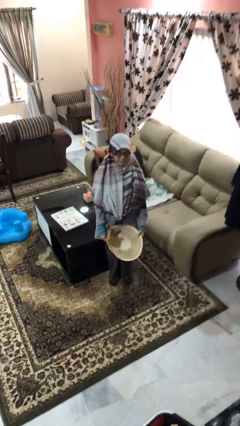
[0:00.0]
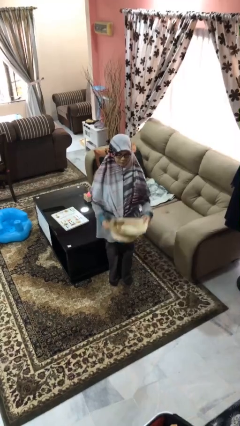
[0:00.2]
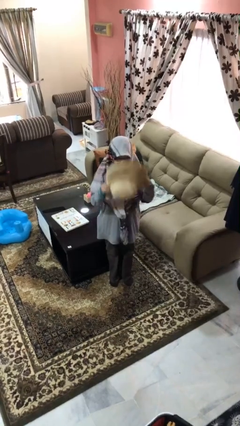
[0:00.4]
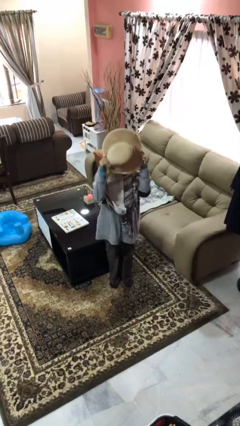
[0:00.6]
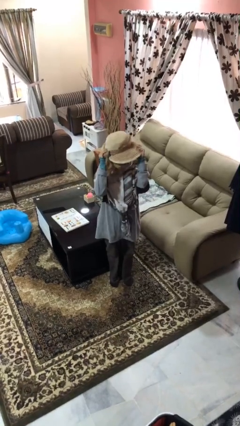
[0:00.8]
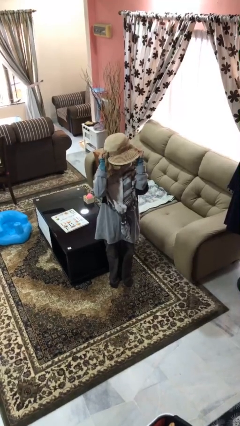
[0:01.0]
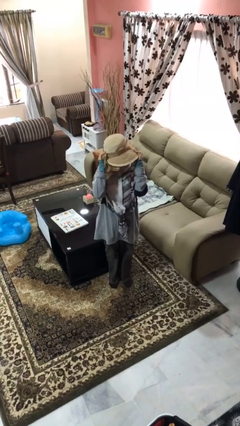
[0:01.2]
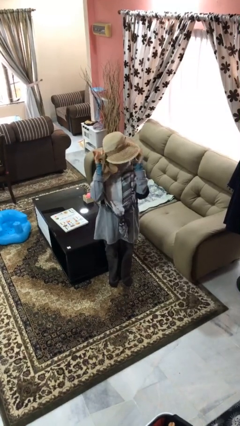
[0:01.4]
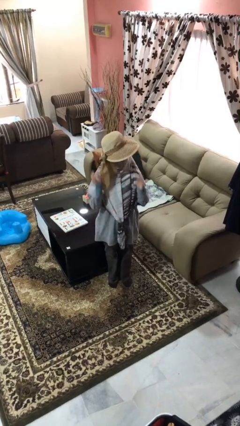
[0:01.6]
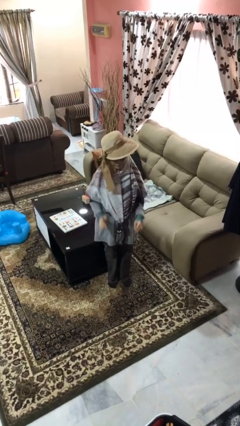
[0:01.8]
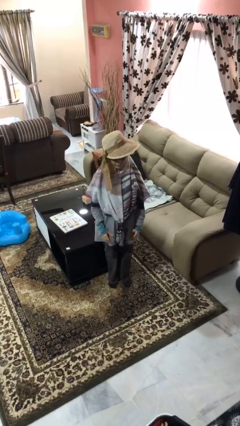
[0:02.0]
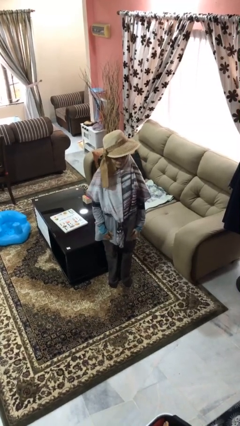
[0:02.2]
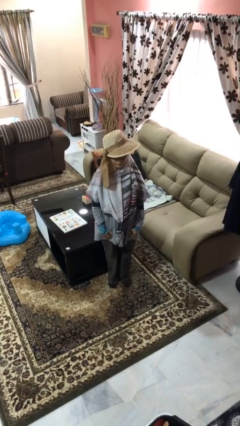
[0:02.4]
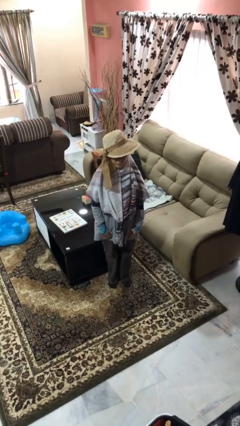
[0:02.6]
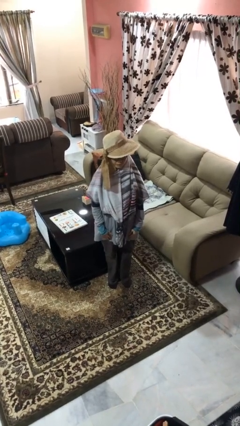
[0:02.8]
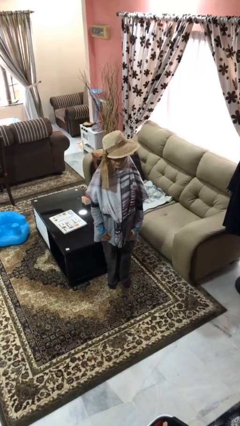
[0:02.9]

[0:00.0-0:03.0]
person puts on hat

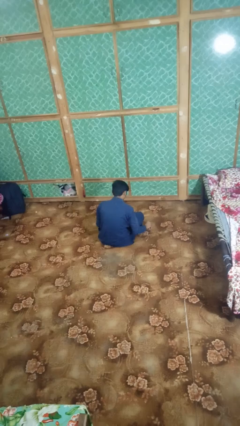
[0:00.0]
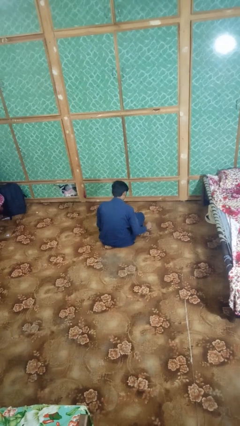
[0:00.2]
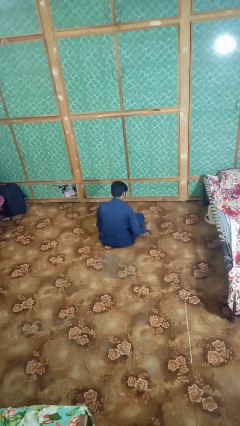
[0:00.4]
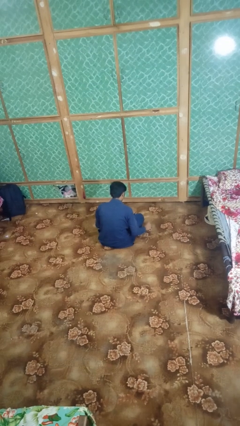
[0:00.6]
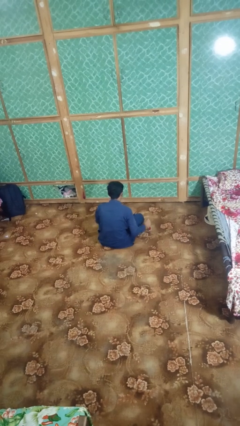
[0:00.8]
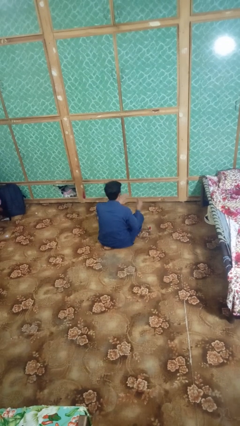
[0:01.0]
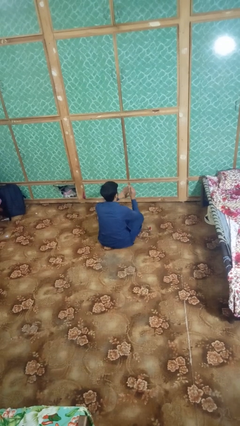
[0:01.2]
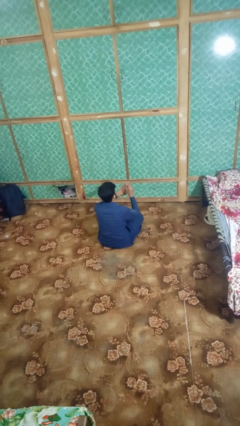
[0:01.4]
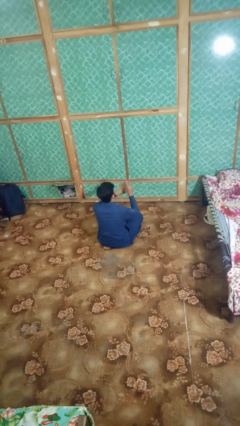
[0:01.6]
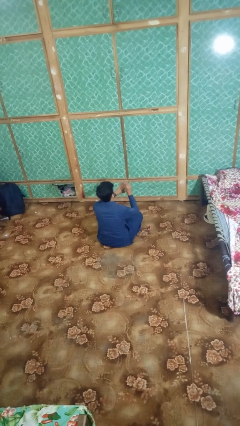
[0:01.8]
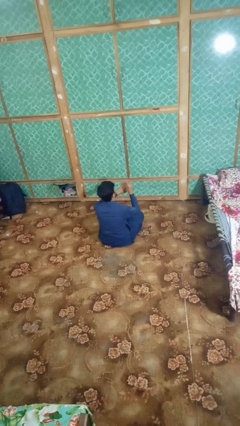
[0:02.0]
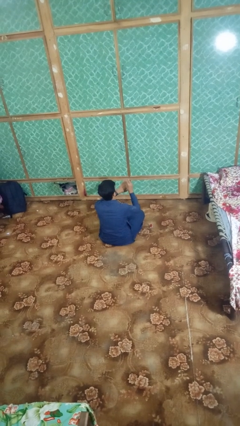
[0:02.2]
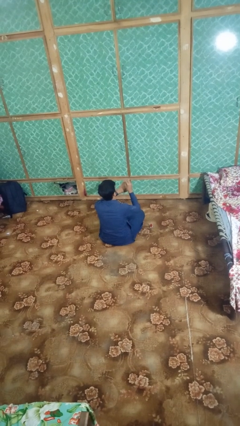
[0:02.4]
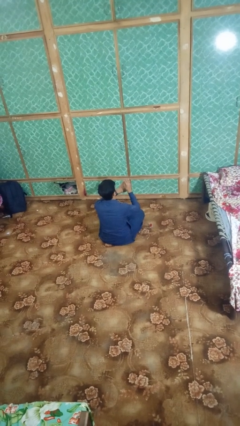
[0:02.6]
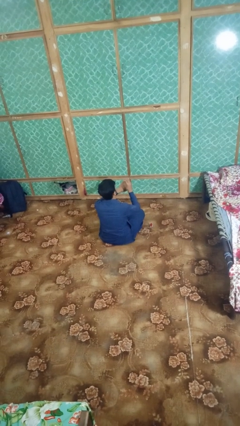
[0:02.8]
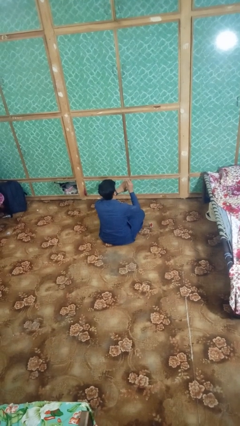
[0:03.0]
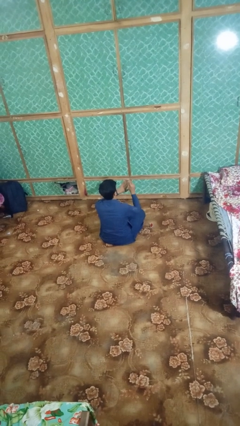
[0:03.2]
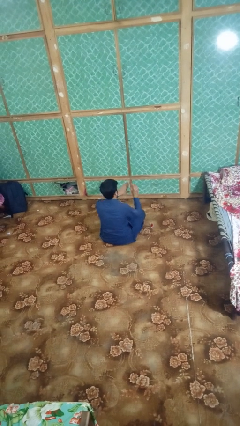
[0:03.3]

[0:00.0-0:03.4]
person paints fingernails

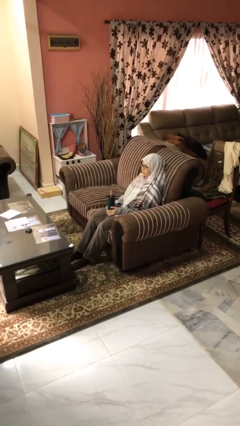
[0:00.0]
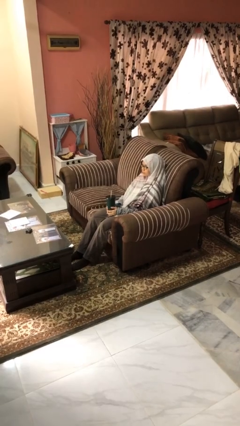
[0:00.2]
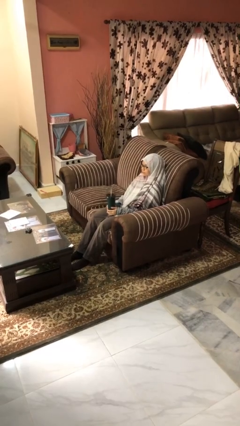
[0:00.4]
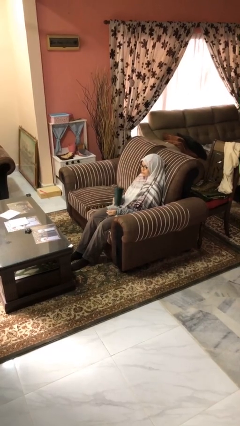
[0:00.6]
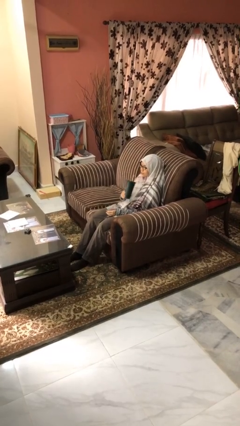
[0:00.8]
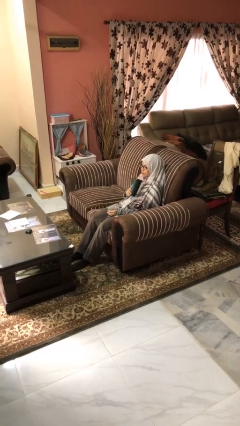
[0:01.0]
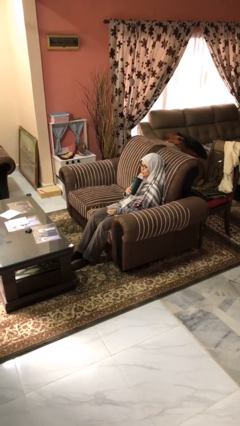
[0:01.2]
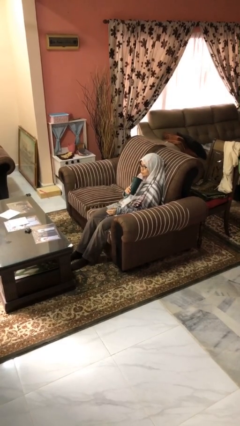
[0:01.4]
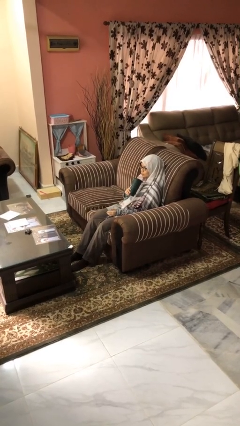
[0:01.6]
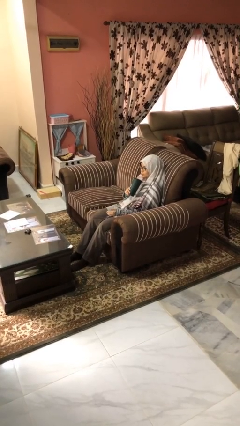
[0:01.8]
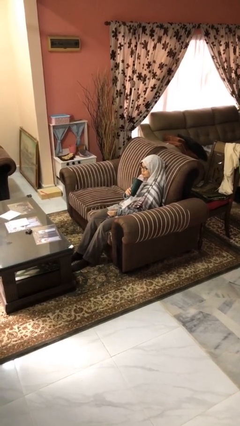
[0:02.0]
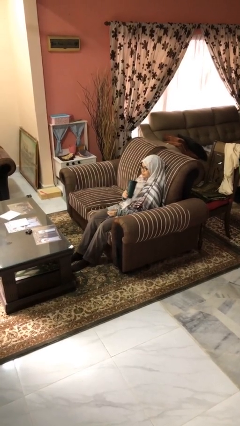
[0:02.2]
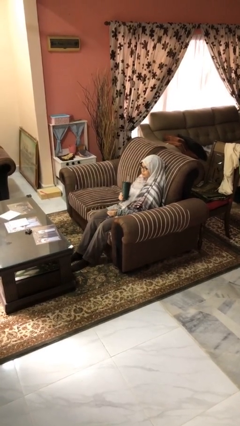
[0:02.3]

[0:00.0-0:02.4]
person drinks from straw

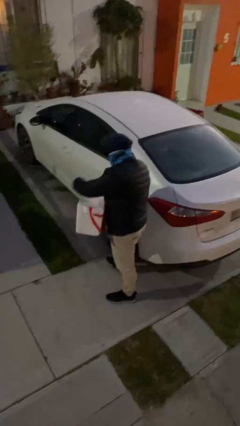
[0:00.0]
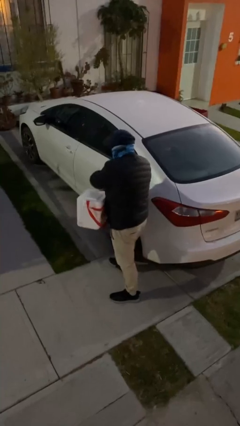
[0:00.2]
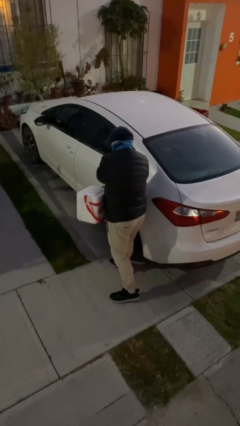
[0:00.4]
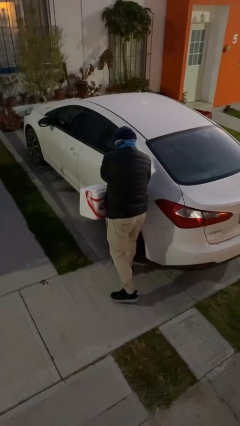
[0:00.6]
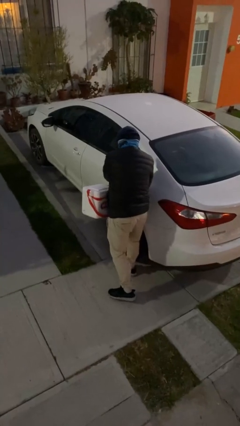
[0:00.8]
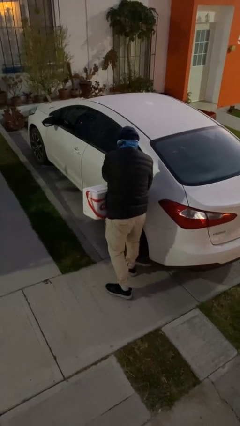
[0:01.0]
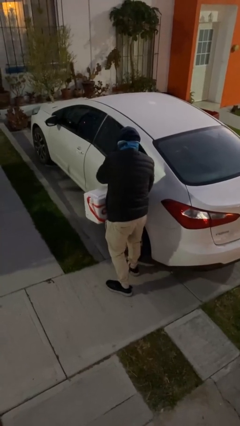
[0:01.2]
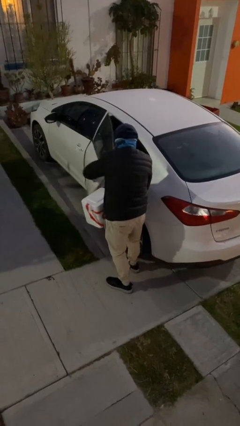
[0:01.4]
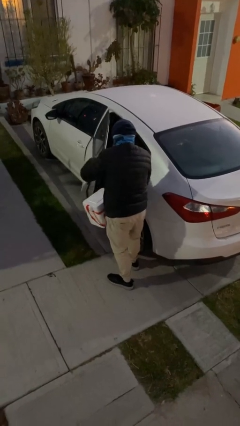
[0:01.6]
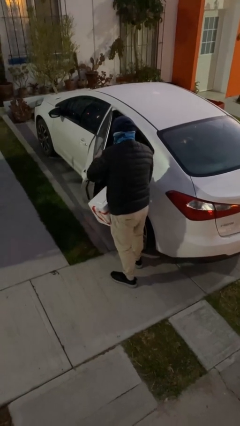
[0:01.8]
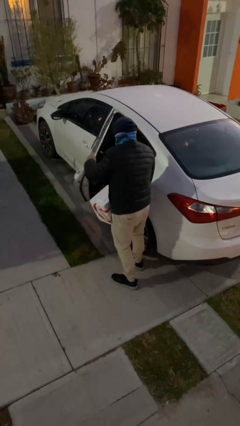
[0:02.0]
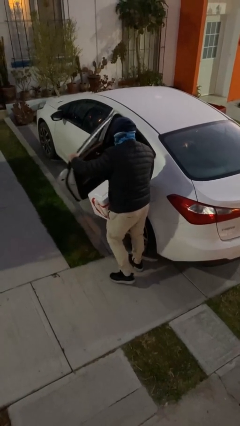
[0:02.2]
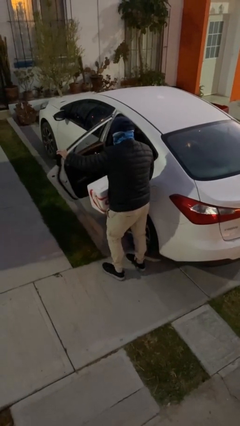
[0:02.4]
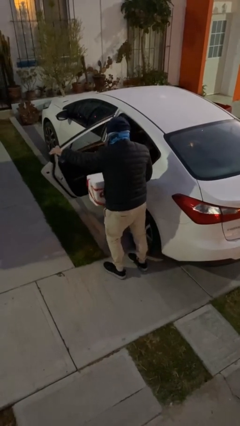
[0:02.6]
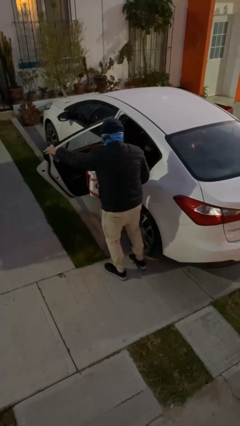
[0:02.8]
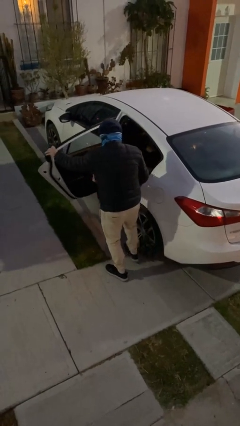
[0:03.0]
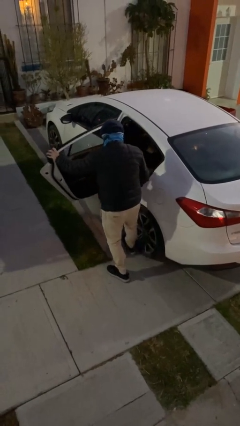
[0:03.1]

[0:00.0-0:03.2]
person opens car door

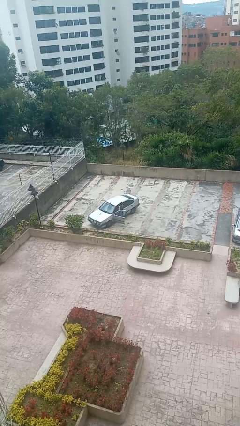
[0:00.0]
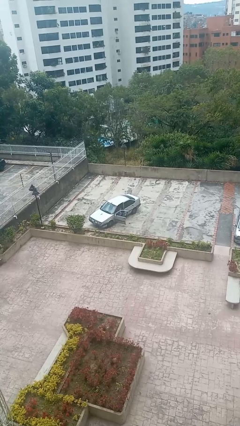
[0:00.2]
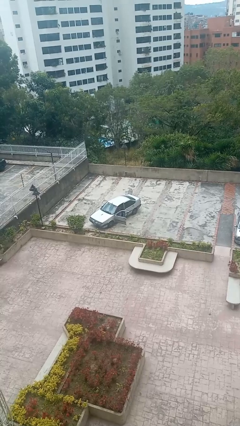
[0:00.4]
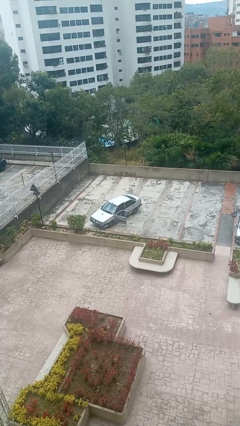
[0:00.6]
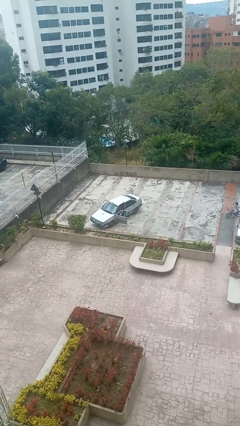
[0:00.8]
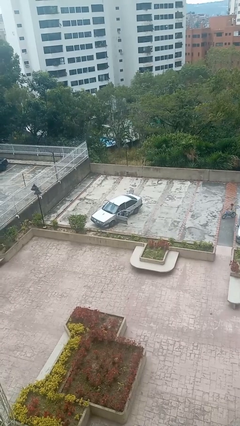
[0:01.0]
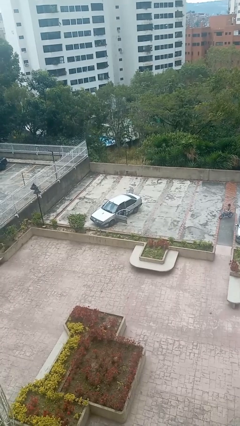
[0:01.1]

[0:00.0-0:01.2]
person enters car

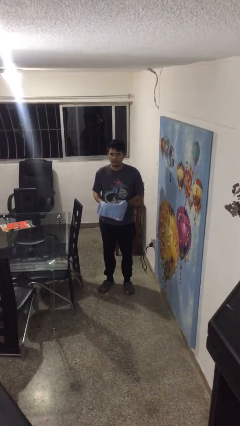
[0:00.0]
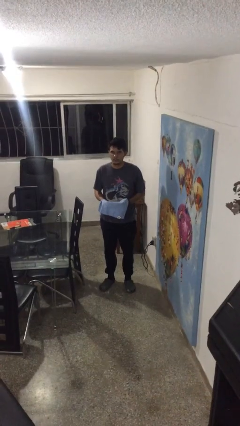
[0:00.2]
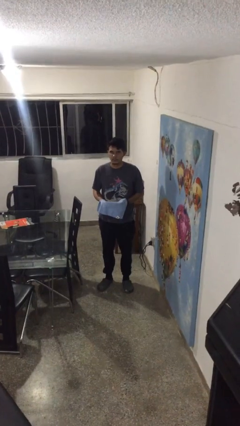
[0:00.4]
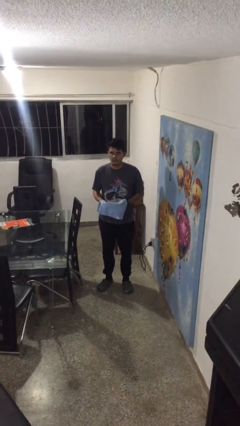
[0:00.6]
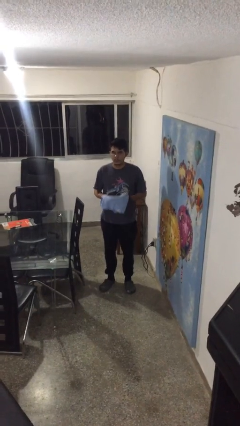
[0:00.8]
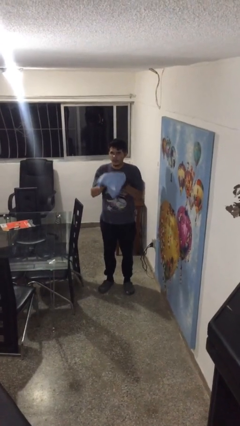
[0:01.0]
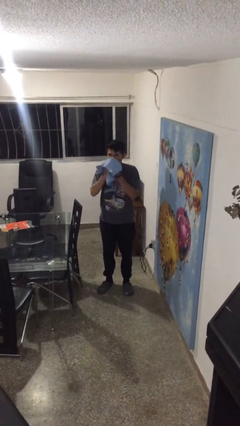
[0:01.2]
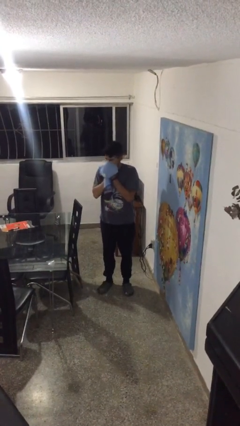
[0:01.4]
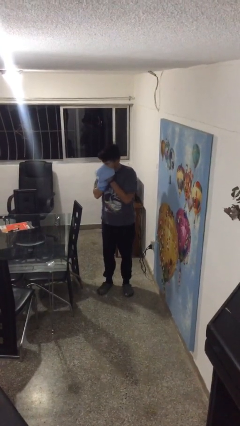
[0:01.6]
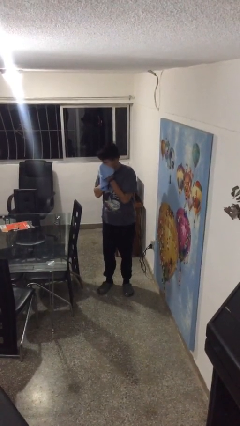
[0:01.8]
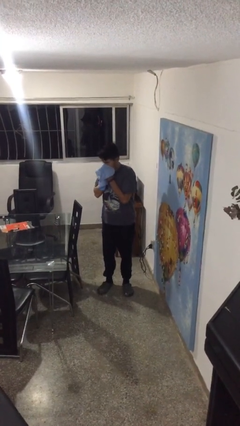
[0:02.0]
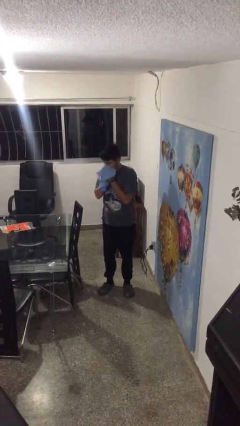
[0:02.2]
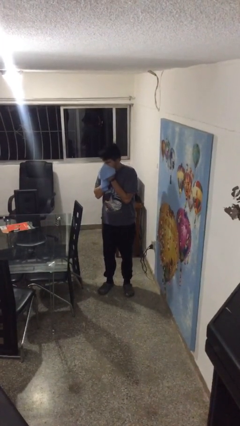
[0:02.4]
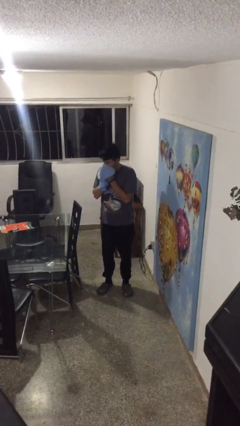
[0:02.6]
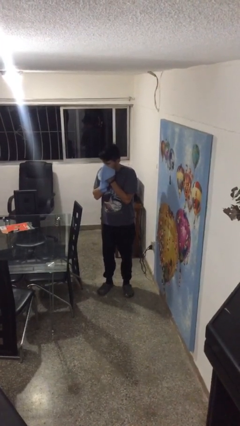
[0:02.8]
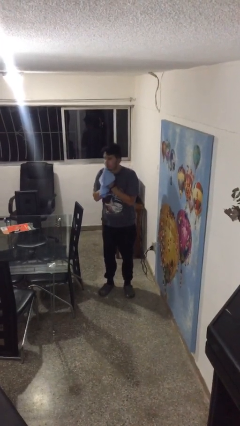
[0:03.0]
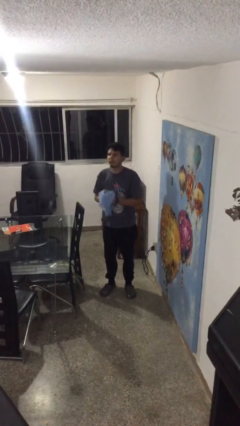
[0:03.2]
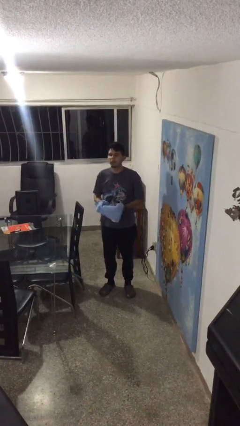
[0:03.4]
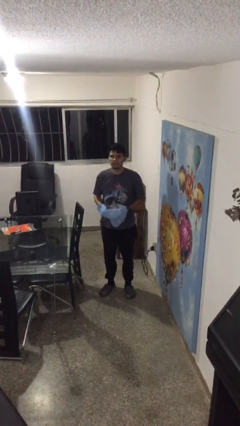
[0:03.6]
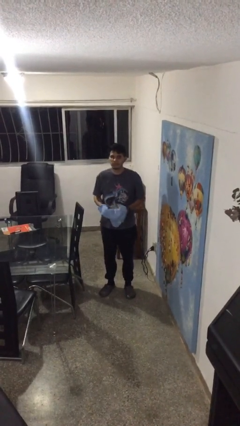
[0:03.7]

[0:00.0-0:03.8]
person blows nose

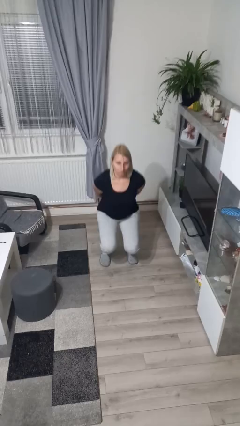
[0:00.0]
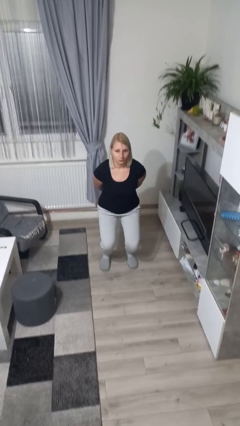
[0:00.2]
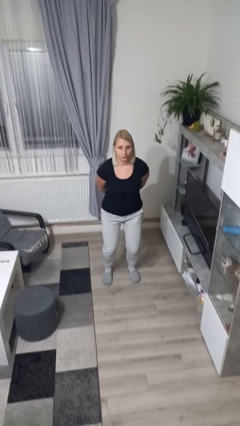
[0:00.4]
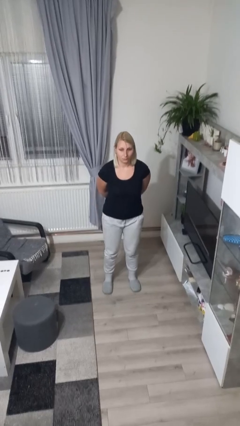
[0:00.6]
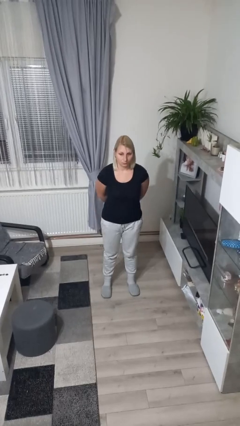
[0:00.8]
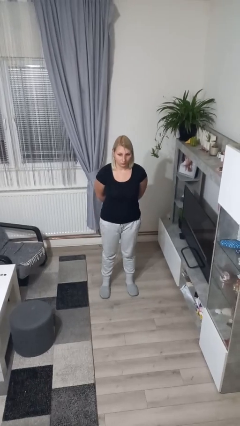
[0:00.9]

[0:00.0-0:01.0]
person stands up
